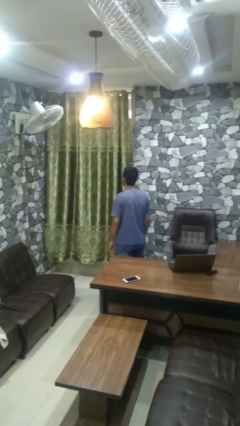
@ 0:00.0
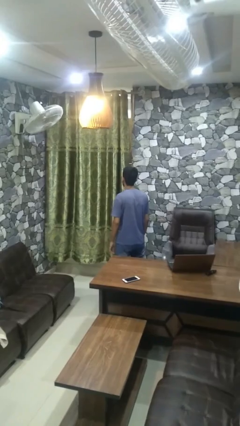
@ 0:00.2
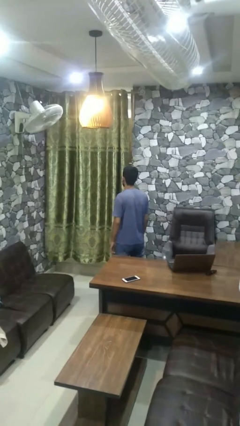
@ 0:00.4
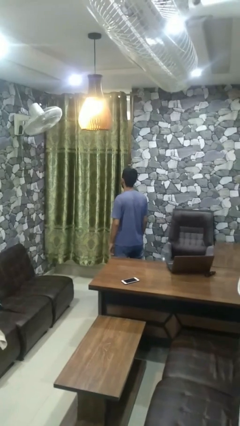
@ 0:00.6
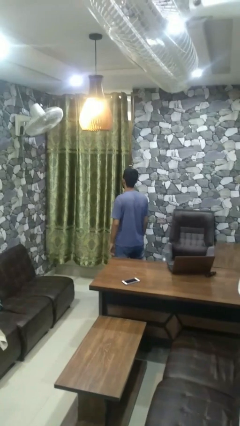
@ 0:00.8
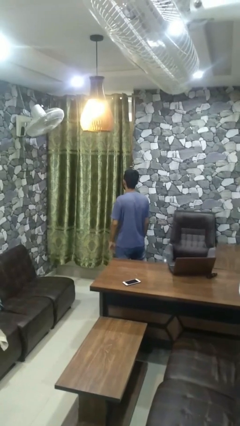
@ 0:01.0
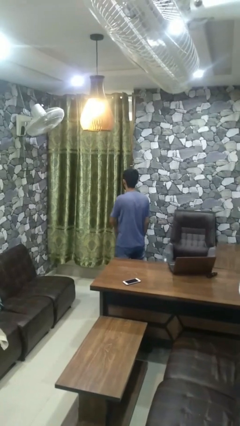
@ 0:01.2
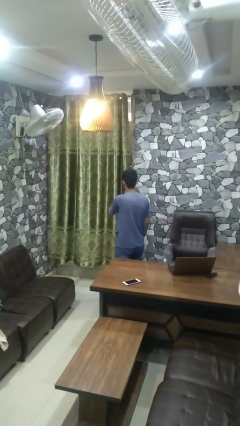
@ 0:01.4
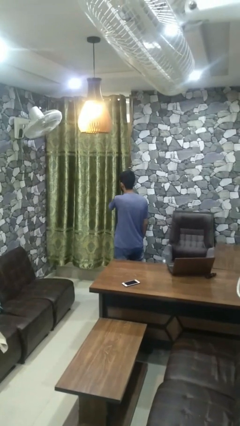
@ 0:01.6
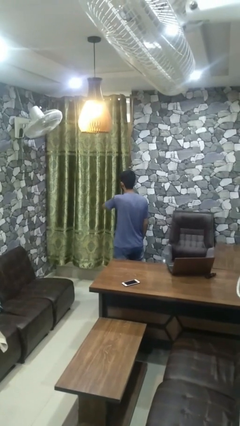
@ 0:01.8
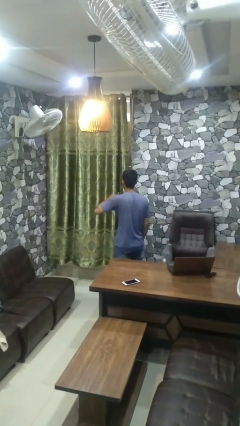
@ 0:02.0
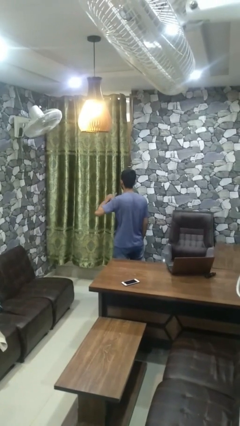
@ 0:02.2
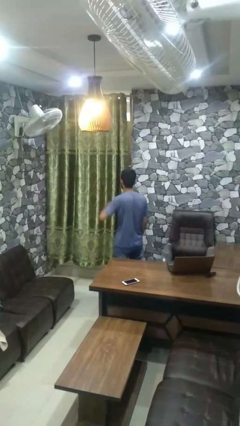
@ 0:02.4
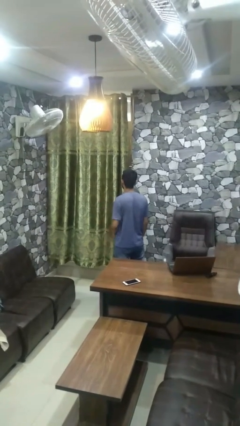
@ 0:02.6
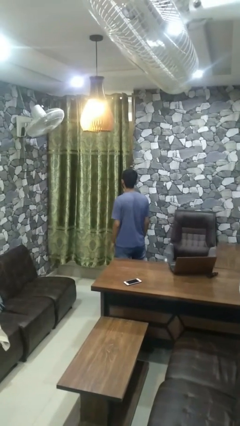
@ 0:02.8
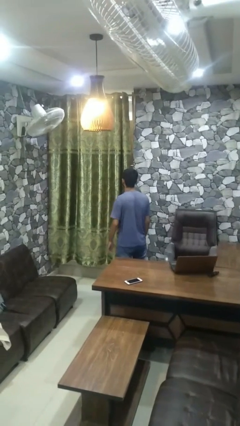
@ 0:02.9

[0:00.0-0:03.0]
person gestures cut

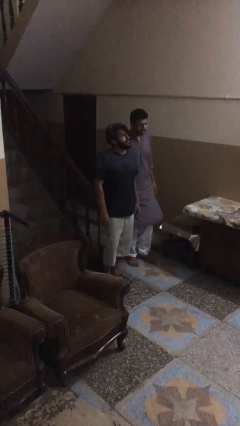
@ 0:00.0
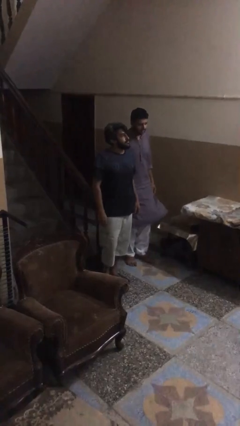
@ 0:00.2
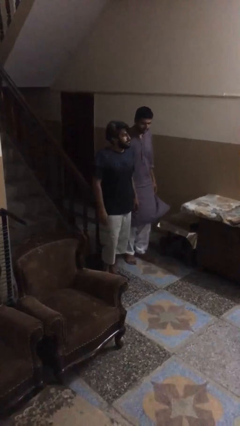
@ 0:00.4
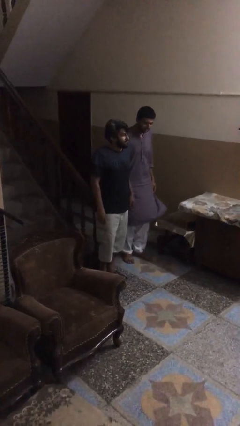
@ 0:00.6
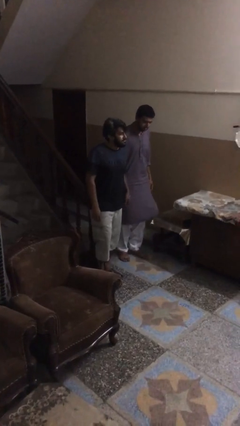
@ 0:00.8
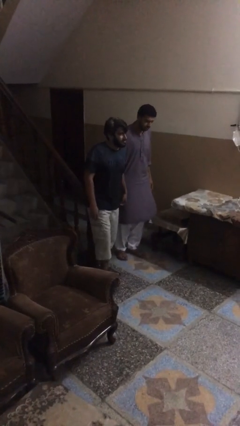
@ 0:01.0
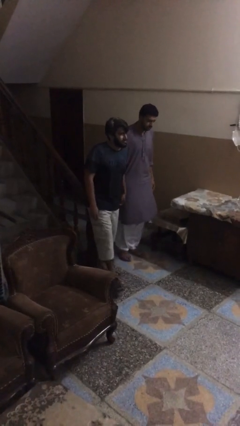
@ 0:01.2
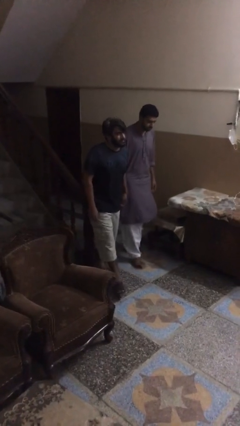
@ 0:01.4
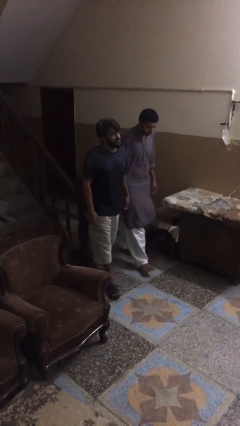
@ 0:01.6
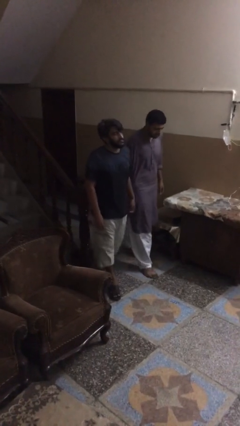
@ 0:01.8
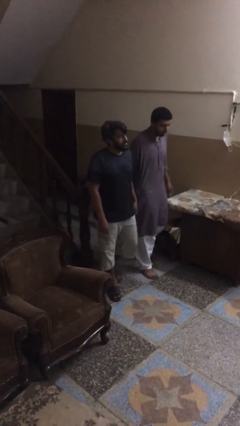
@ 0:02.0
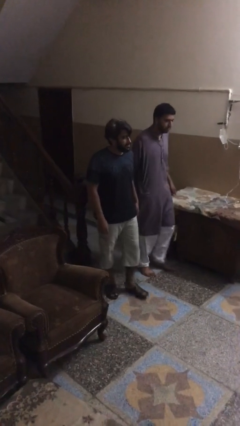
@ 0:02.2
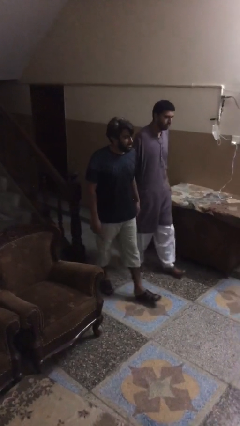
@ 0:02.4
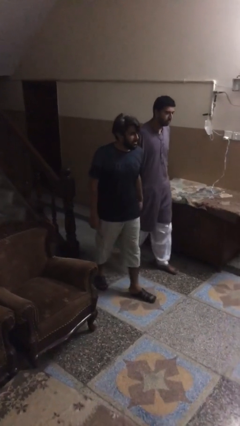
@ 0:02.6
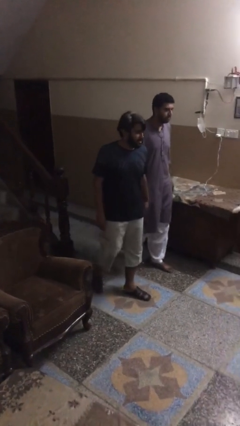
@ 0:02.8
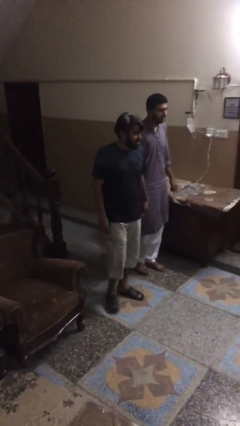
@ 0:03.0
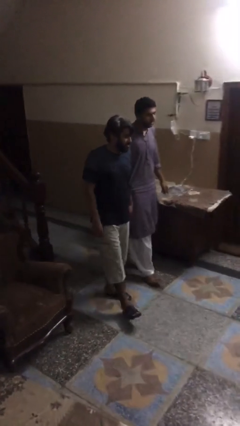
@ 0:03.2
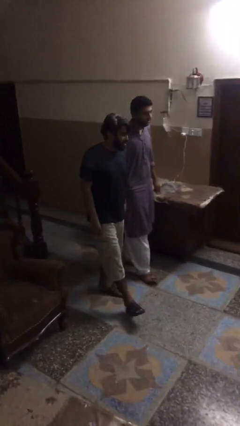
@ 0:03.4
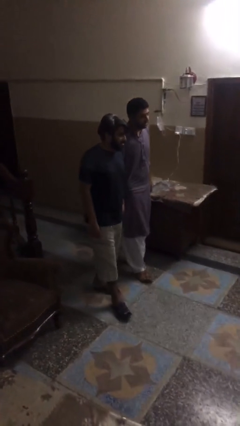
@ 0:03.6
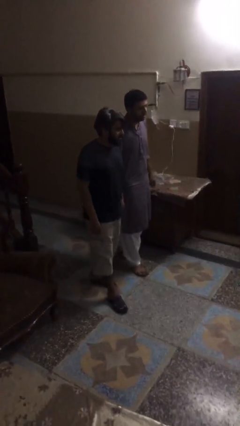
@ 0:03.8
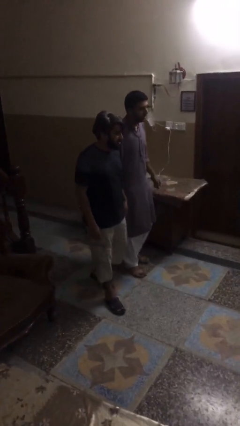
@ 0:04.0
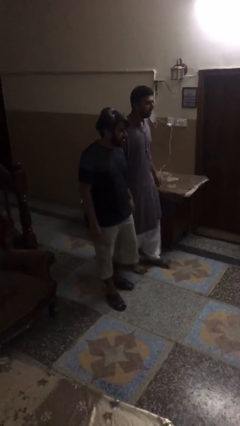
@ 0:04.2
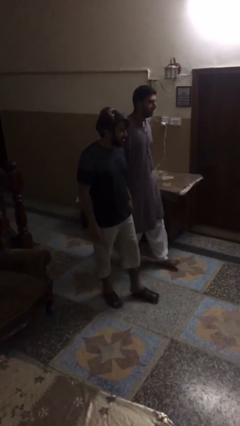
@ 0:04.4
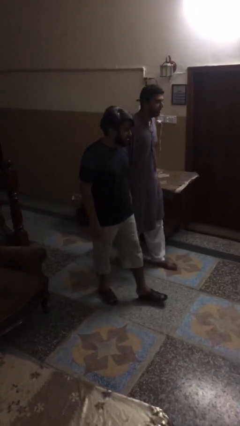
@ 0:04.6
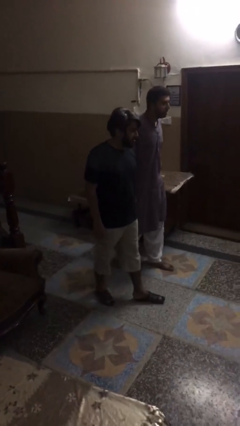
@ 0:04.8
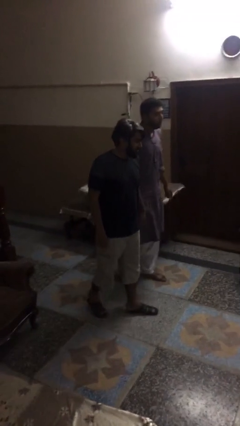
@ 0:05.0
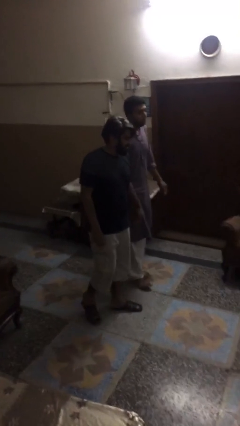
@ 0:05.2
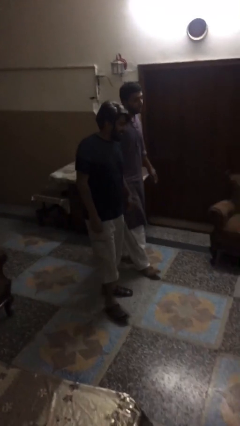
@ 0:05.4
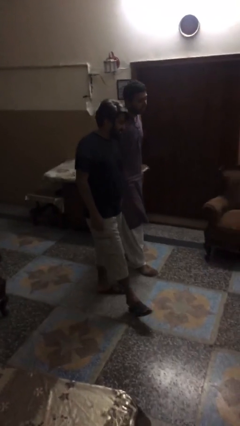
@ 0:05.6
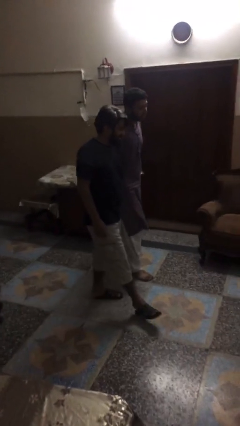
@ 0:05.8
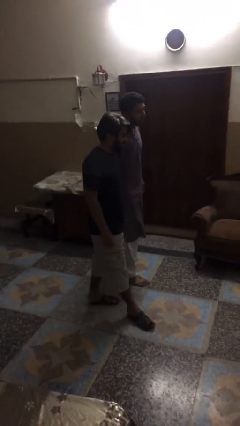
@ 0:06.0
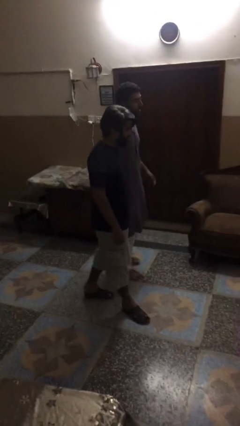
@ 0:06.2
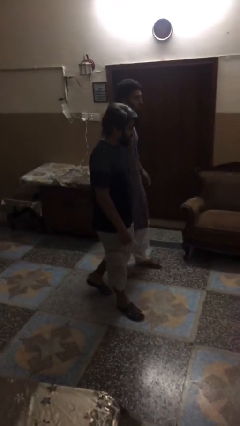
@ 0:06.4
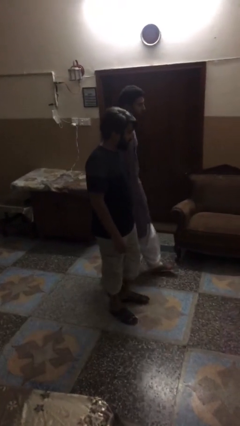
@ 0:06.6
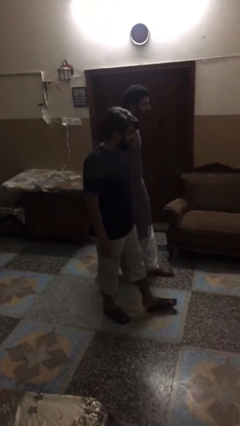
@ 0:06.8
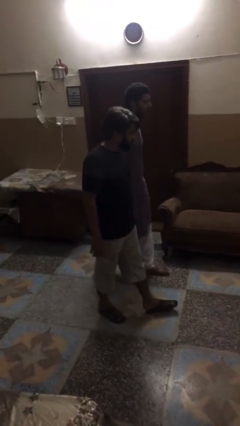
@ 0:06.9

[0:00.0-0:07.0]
person holds hand

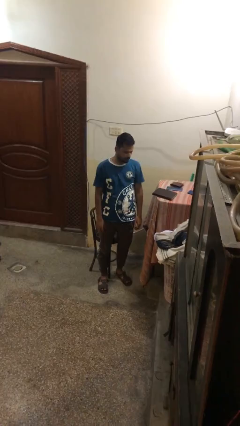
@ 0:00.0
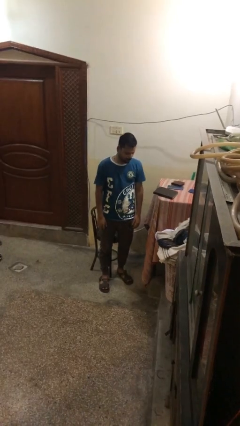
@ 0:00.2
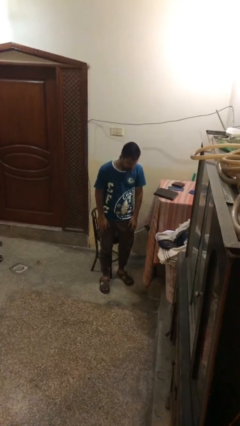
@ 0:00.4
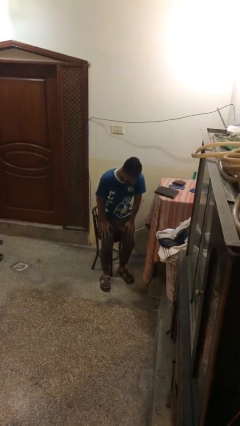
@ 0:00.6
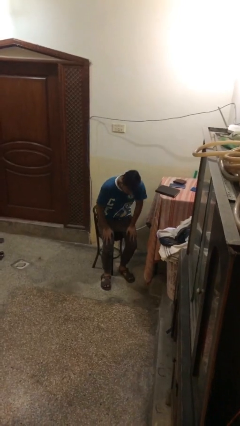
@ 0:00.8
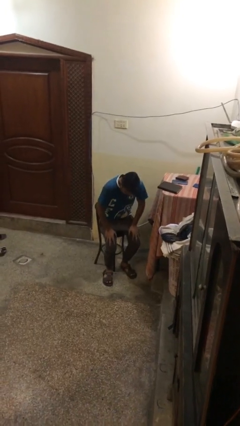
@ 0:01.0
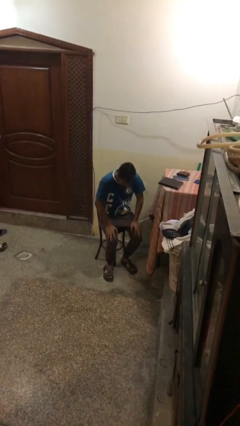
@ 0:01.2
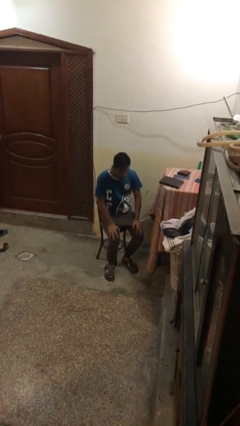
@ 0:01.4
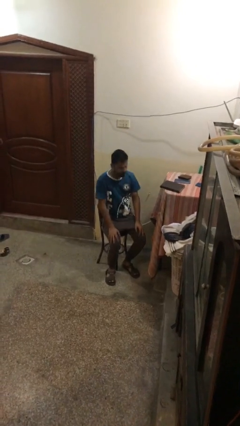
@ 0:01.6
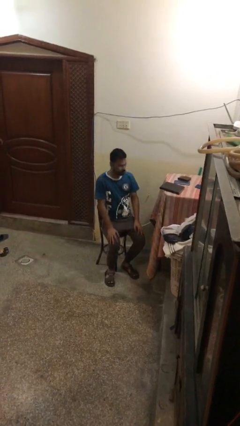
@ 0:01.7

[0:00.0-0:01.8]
person sits down

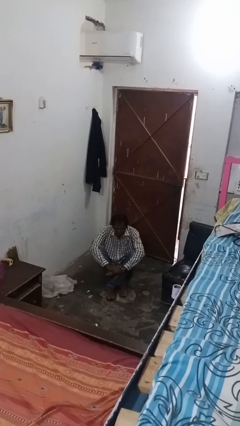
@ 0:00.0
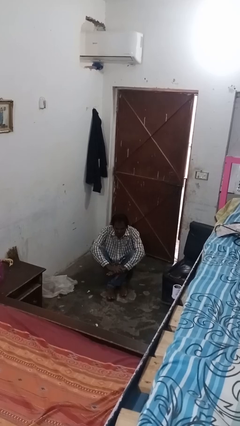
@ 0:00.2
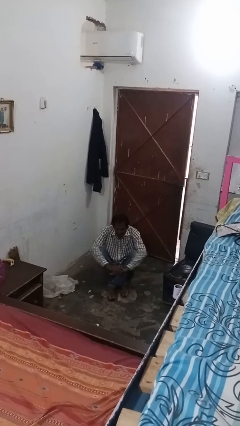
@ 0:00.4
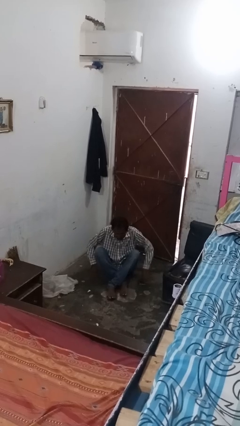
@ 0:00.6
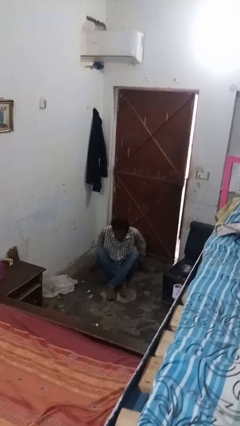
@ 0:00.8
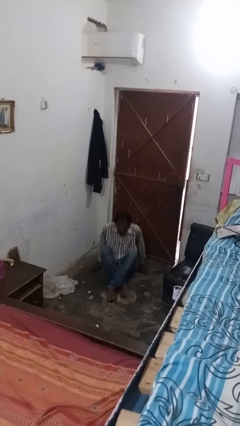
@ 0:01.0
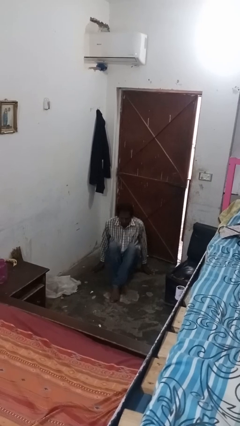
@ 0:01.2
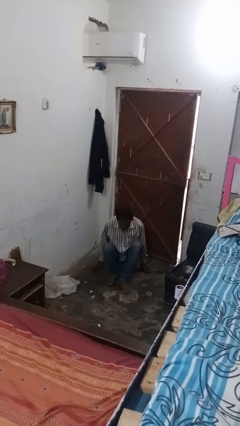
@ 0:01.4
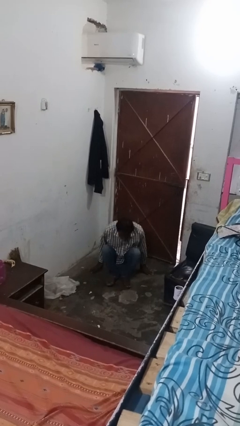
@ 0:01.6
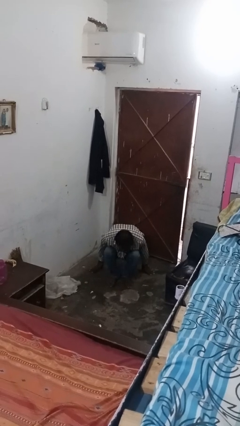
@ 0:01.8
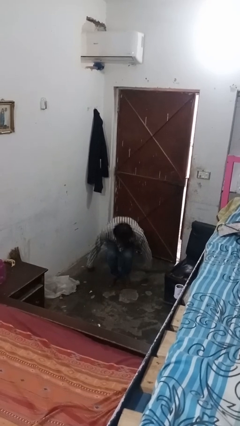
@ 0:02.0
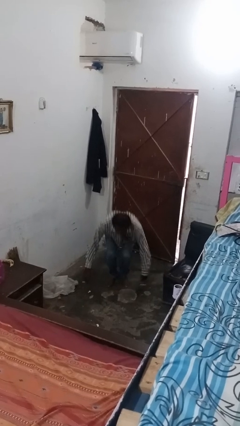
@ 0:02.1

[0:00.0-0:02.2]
person stands up from floor

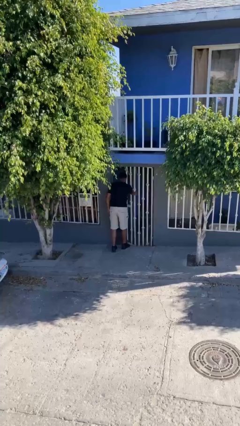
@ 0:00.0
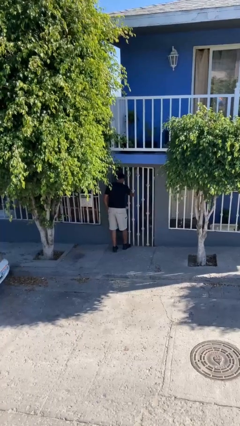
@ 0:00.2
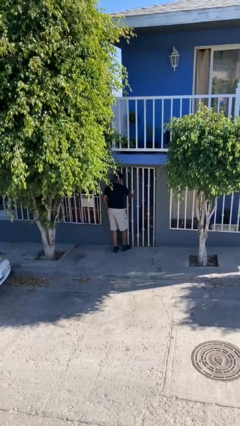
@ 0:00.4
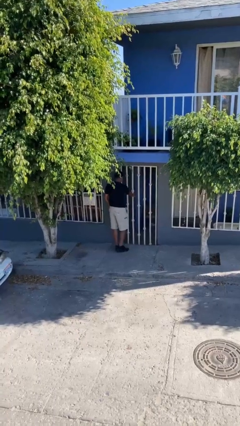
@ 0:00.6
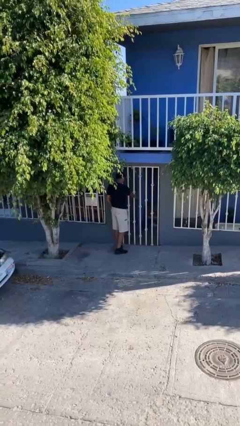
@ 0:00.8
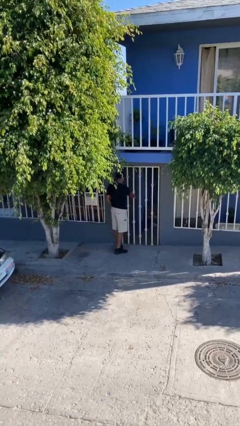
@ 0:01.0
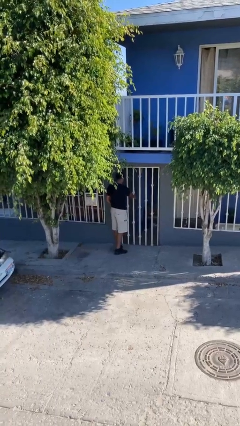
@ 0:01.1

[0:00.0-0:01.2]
person closes facility door

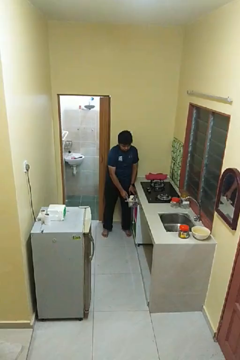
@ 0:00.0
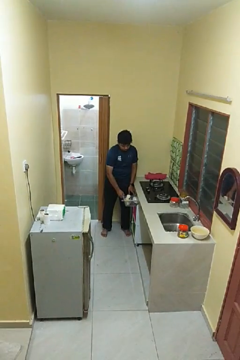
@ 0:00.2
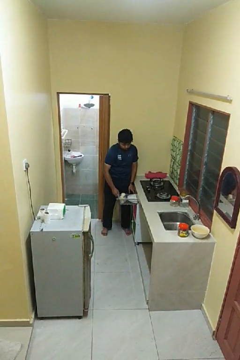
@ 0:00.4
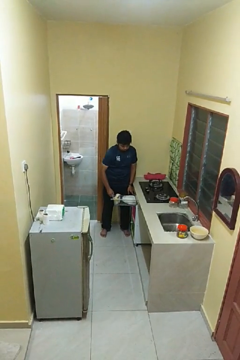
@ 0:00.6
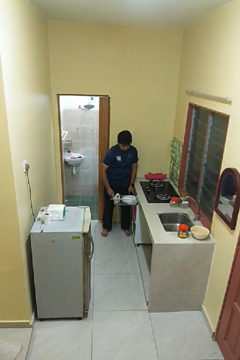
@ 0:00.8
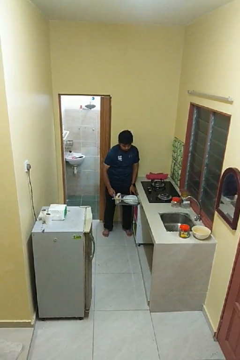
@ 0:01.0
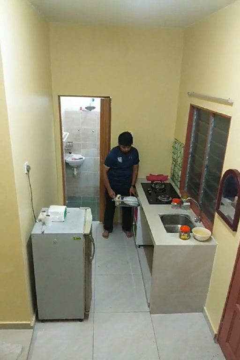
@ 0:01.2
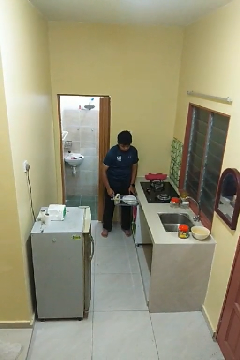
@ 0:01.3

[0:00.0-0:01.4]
person opens kitchen drawer

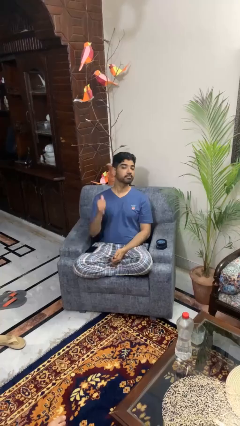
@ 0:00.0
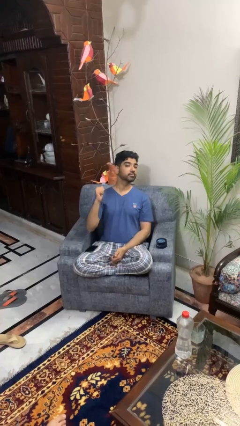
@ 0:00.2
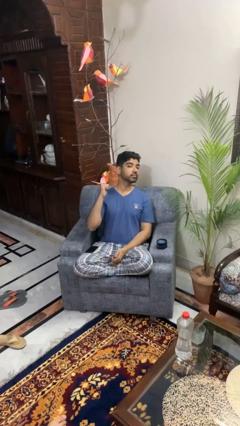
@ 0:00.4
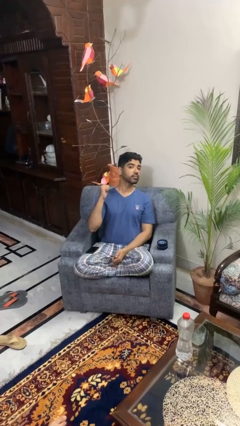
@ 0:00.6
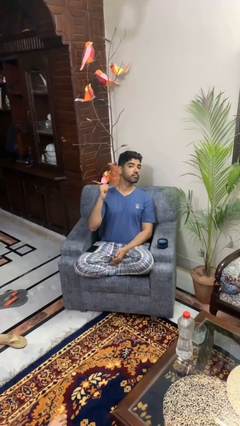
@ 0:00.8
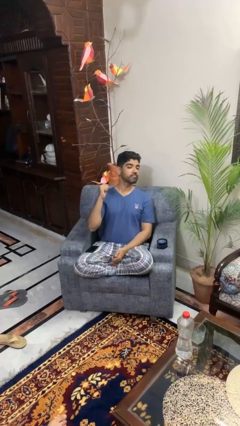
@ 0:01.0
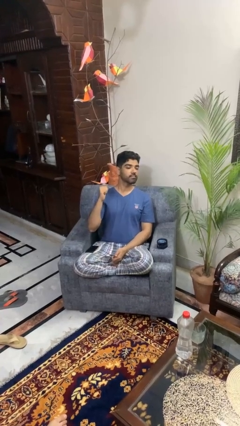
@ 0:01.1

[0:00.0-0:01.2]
person gestures behind me
